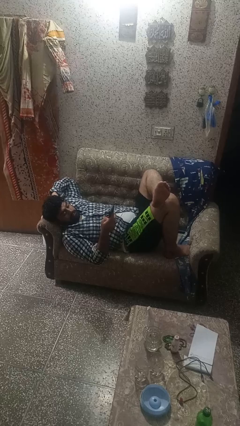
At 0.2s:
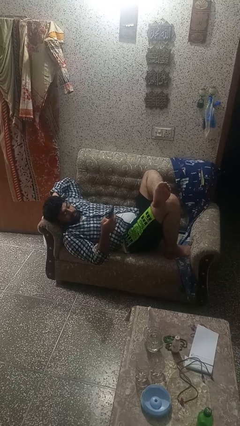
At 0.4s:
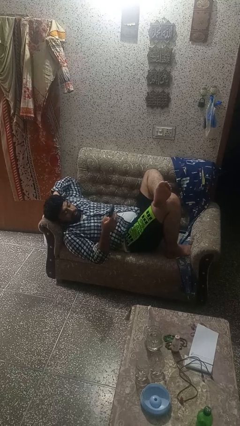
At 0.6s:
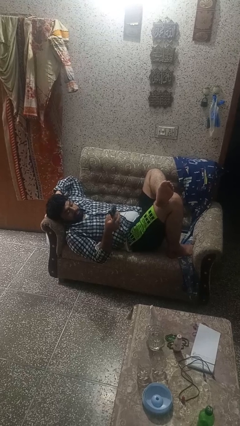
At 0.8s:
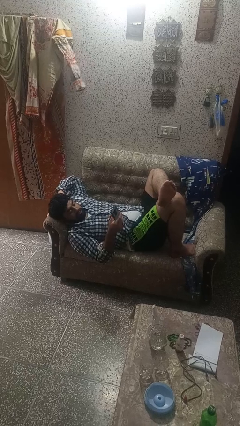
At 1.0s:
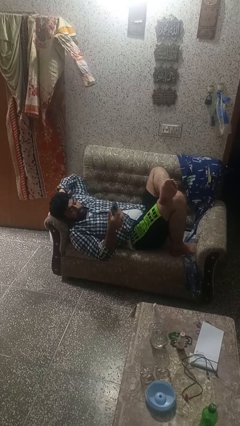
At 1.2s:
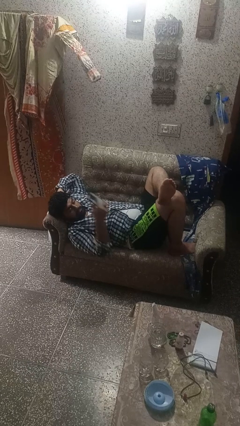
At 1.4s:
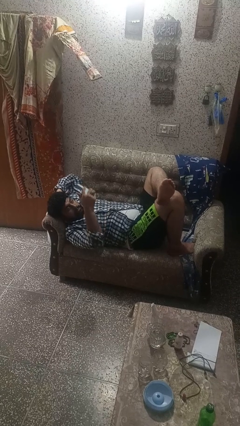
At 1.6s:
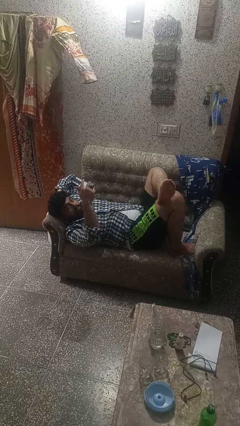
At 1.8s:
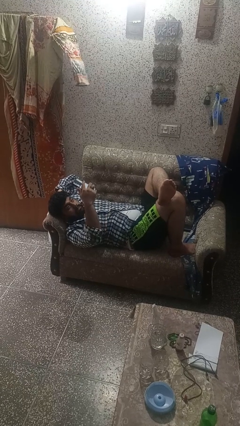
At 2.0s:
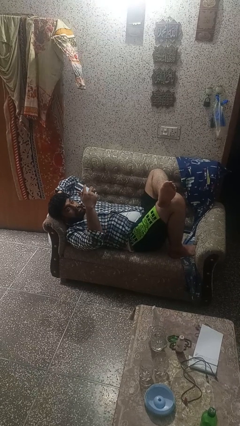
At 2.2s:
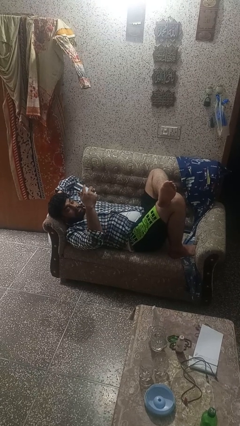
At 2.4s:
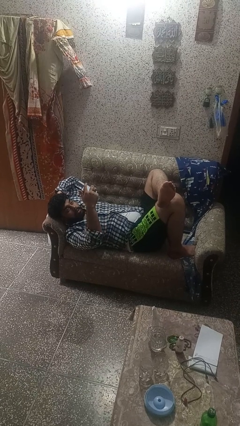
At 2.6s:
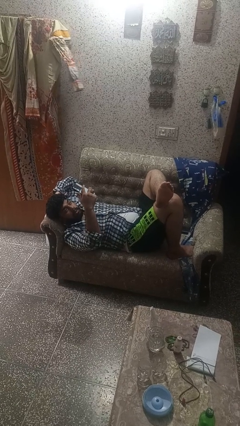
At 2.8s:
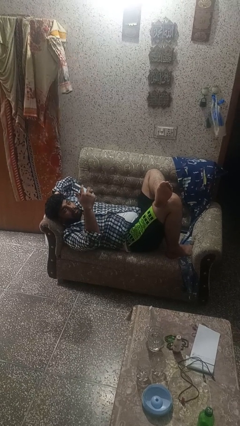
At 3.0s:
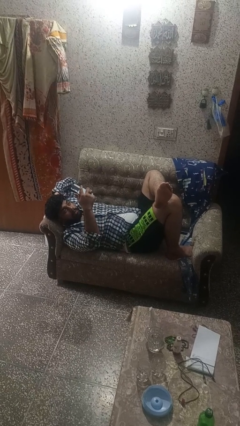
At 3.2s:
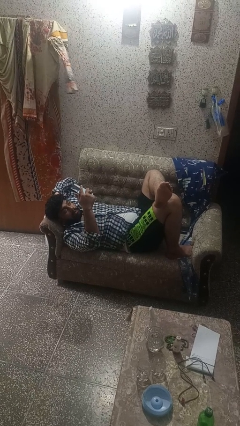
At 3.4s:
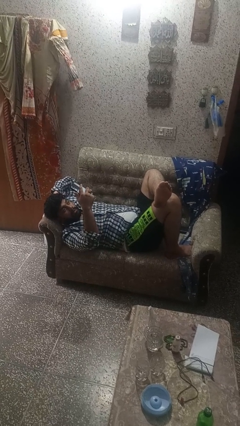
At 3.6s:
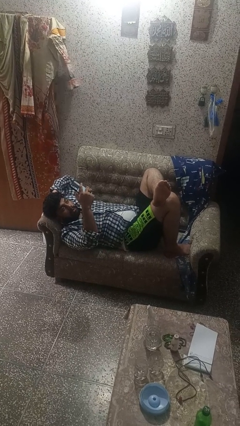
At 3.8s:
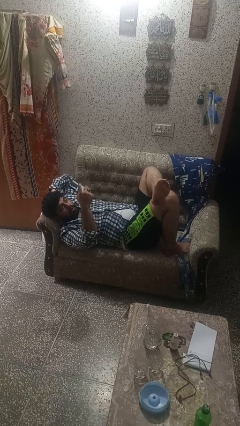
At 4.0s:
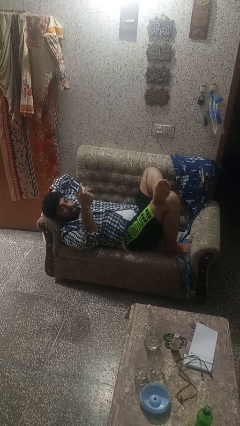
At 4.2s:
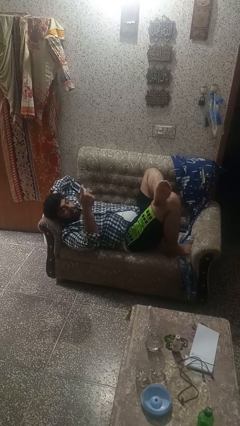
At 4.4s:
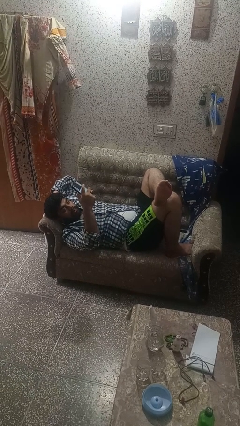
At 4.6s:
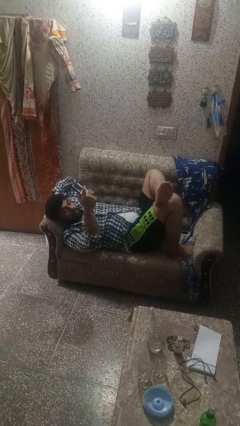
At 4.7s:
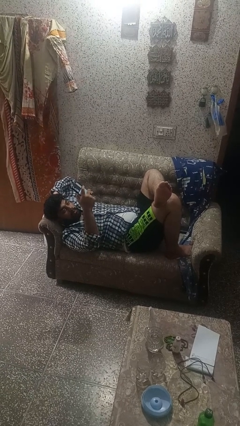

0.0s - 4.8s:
person takes selfie

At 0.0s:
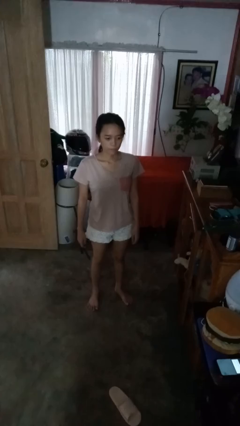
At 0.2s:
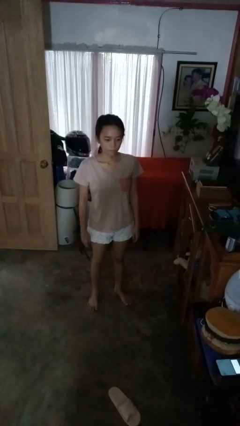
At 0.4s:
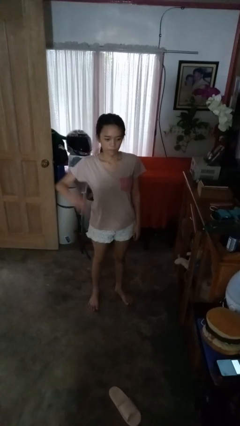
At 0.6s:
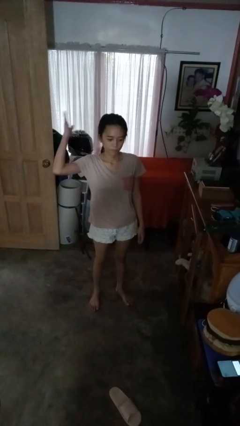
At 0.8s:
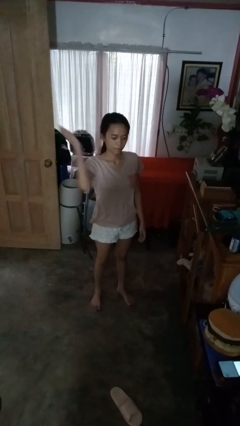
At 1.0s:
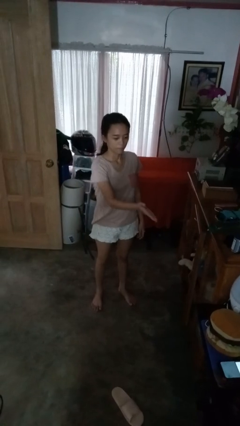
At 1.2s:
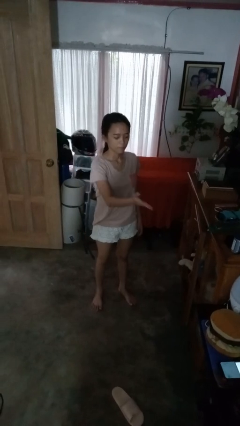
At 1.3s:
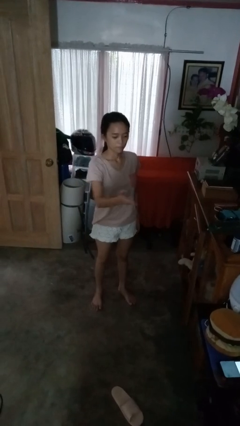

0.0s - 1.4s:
person karate chop

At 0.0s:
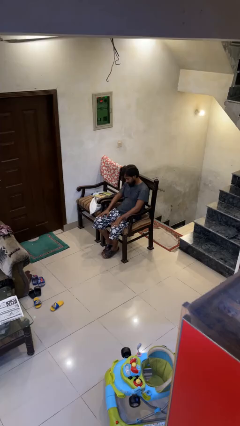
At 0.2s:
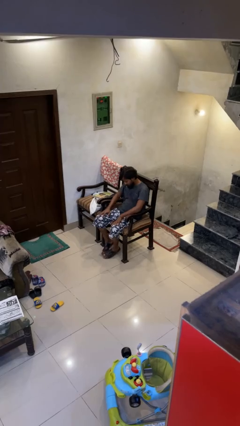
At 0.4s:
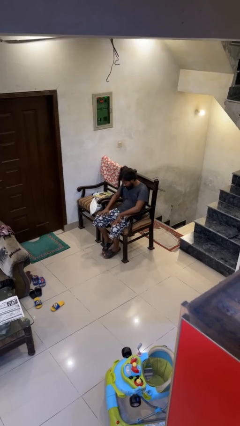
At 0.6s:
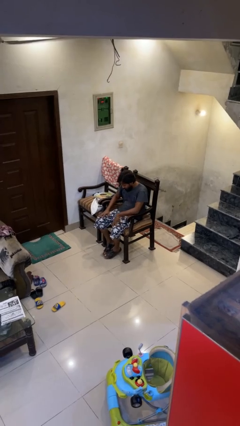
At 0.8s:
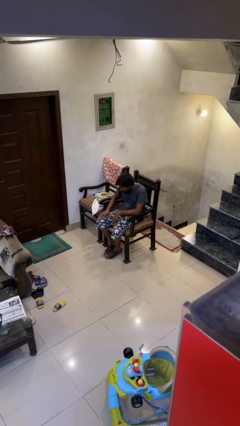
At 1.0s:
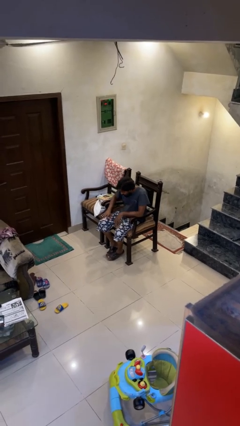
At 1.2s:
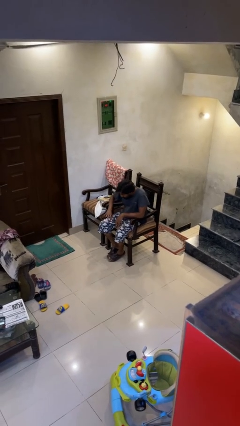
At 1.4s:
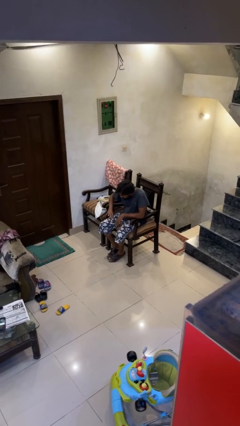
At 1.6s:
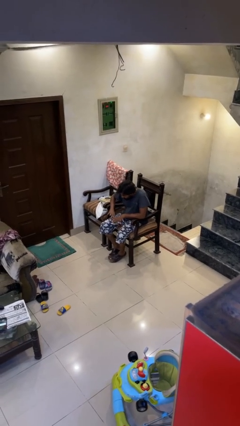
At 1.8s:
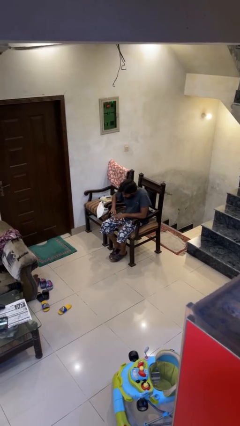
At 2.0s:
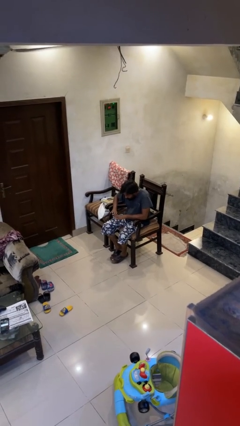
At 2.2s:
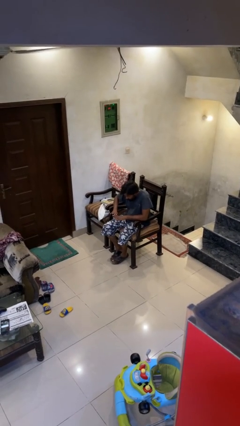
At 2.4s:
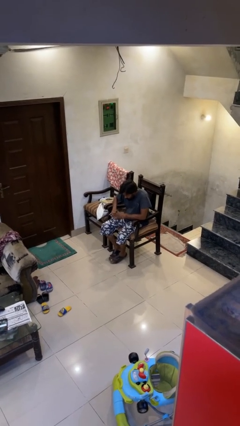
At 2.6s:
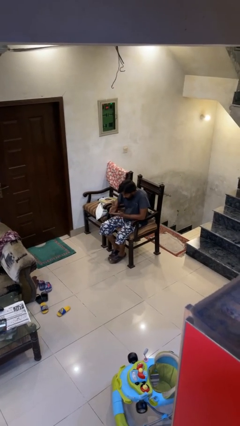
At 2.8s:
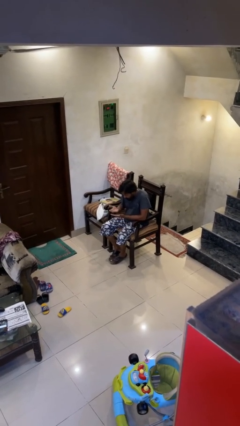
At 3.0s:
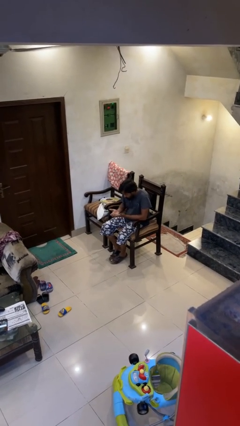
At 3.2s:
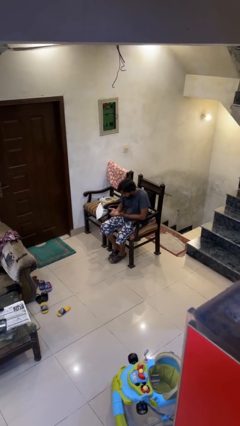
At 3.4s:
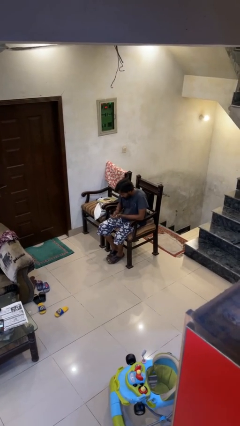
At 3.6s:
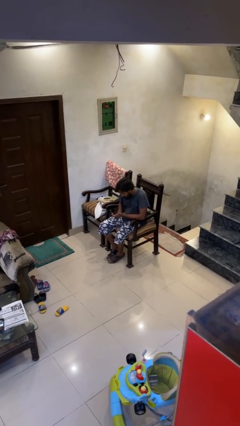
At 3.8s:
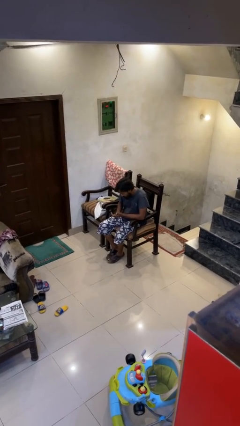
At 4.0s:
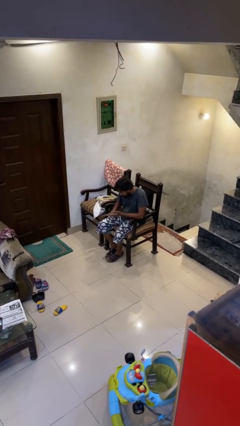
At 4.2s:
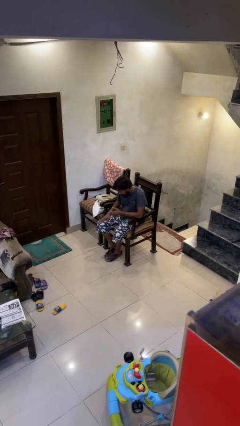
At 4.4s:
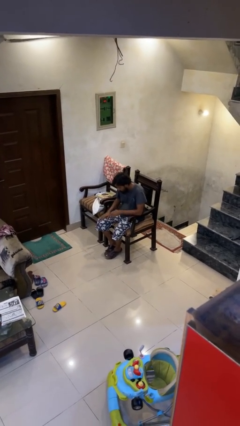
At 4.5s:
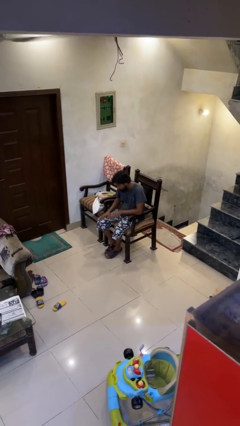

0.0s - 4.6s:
person looks at hands in lap

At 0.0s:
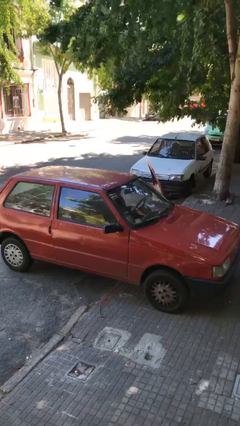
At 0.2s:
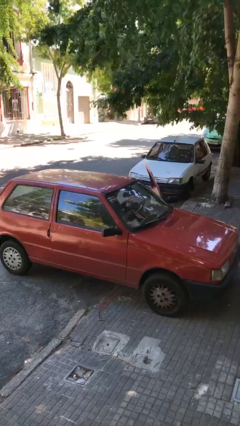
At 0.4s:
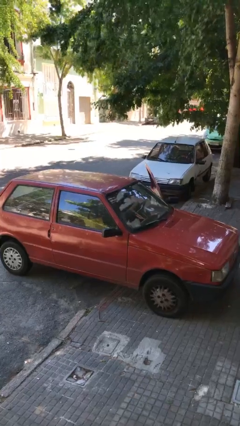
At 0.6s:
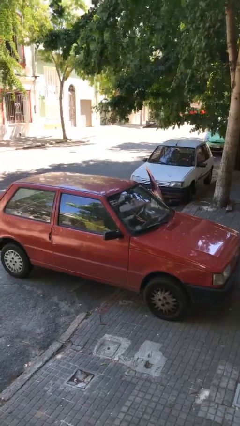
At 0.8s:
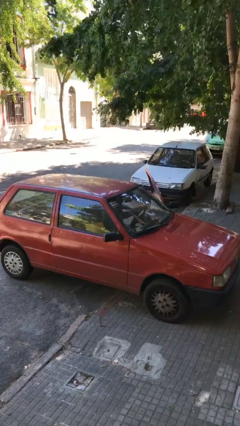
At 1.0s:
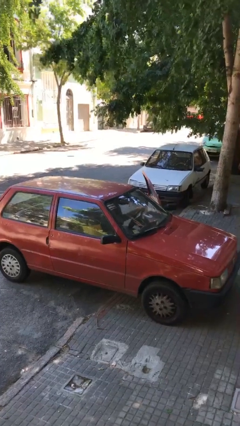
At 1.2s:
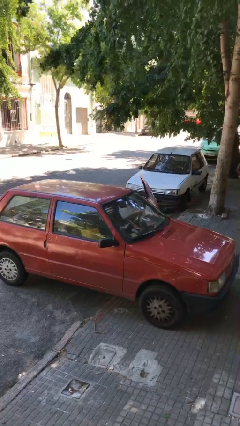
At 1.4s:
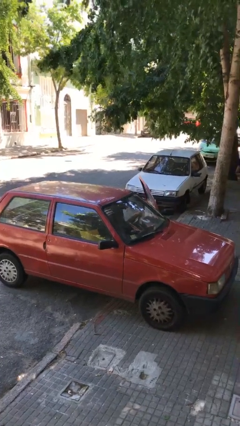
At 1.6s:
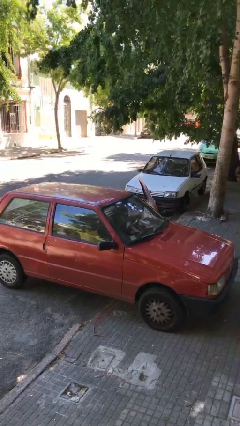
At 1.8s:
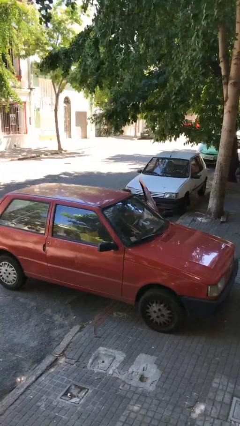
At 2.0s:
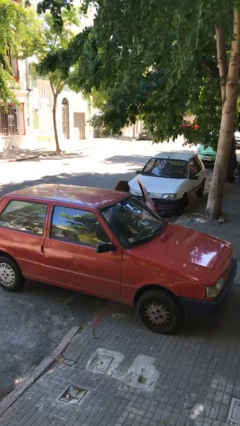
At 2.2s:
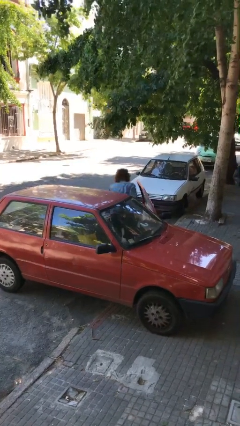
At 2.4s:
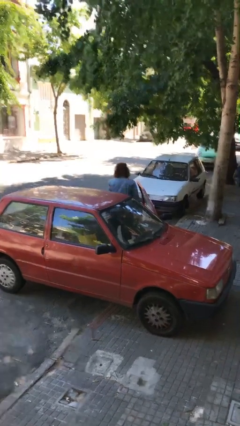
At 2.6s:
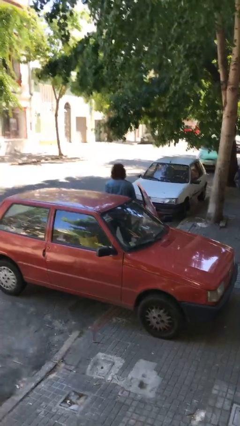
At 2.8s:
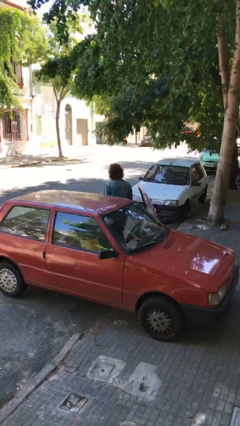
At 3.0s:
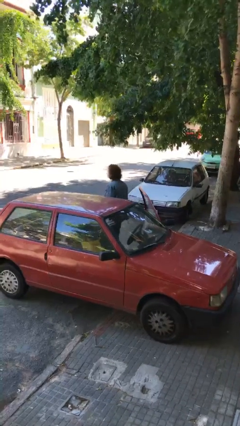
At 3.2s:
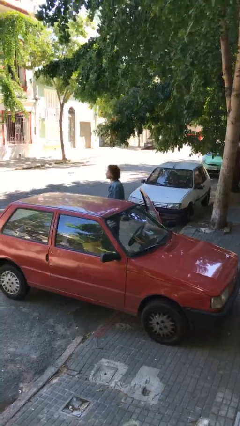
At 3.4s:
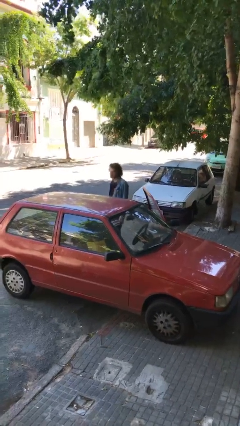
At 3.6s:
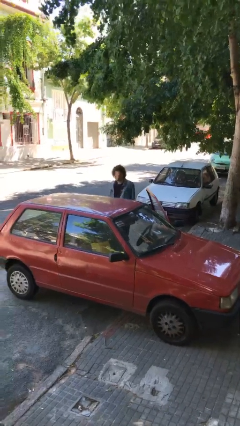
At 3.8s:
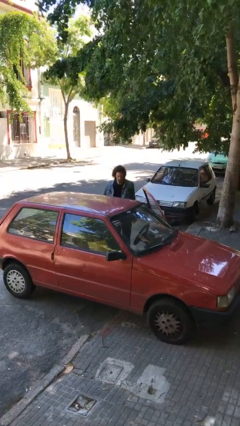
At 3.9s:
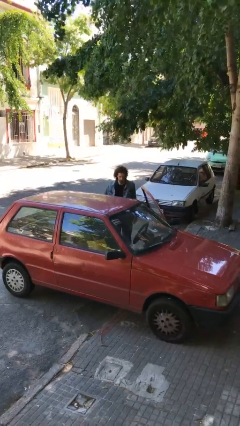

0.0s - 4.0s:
person exits car

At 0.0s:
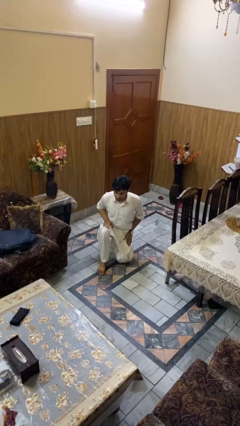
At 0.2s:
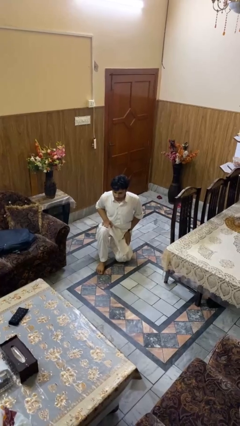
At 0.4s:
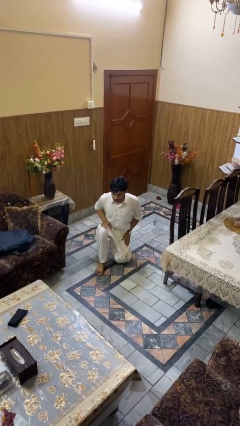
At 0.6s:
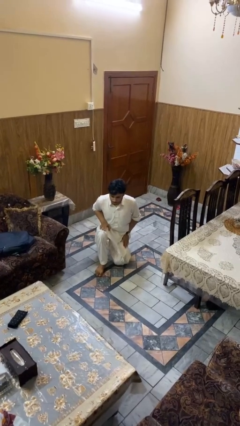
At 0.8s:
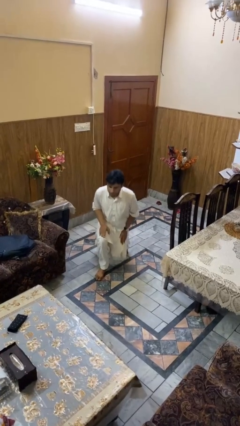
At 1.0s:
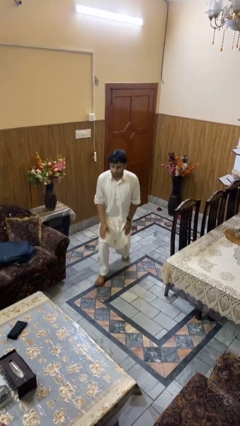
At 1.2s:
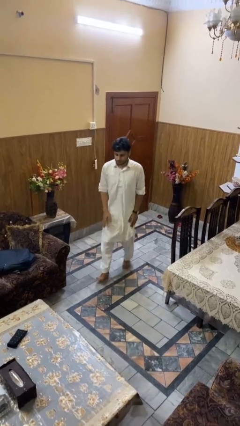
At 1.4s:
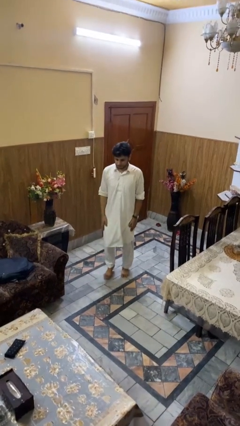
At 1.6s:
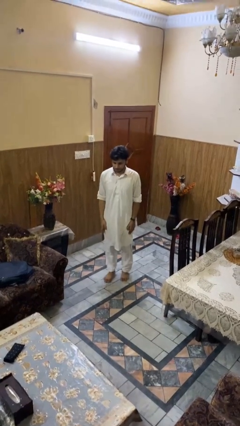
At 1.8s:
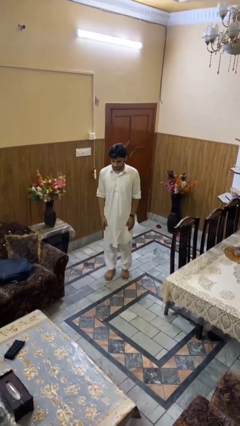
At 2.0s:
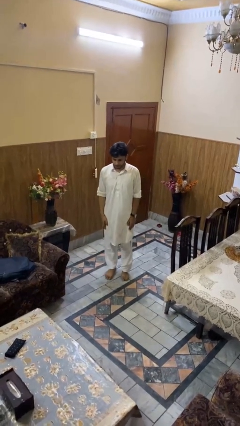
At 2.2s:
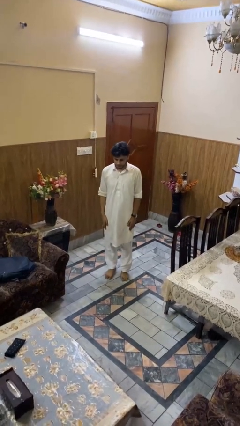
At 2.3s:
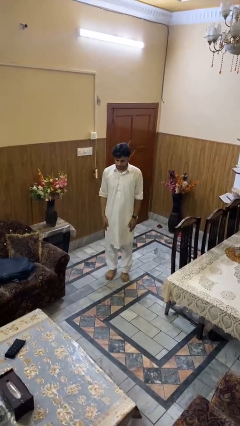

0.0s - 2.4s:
person stands up from floor

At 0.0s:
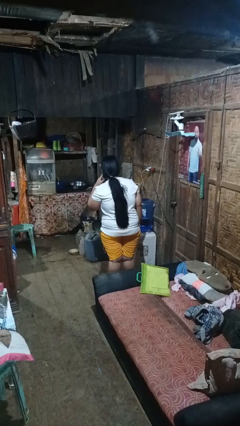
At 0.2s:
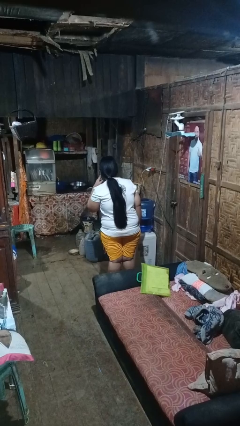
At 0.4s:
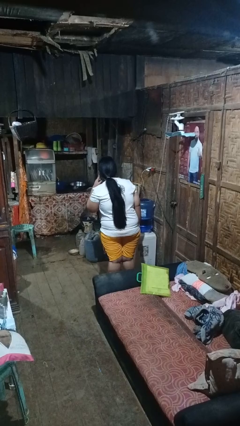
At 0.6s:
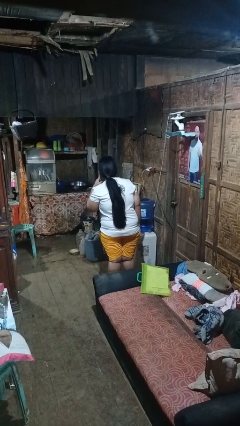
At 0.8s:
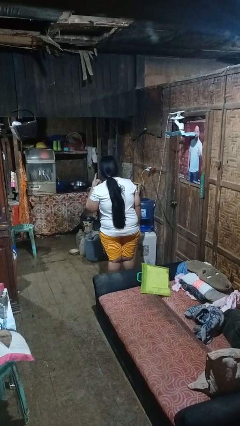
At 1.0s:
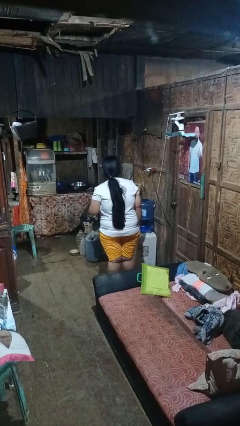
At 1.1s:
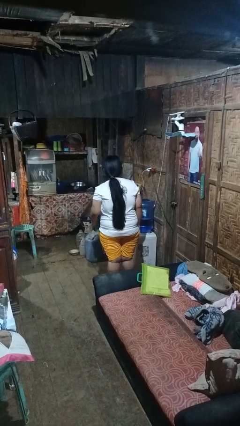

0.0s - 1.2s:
person gestures listen closely
